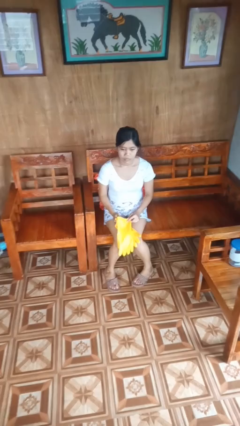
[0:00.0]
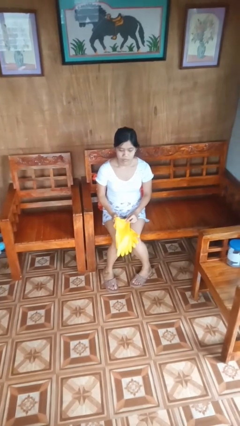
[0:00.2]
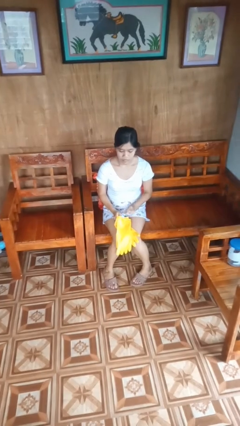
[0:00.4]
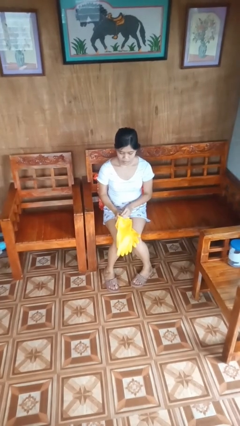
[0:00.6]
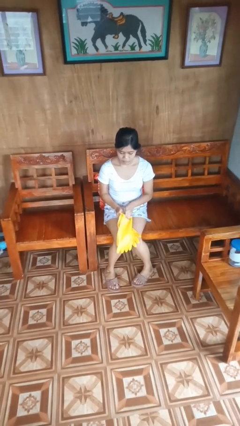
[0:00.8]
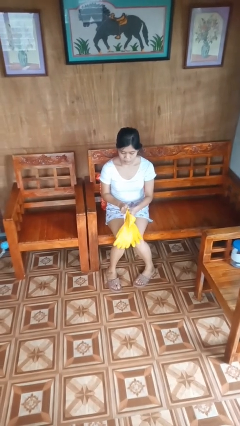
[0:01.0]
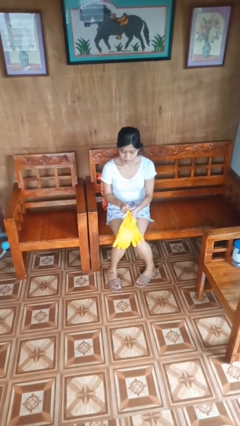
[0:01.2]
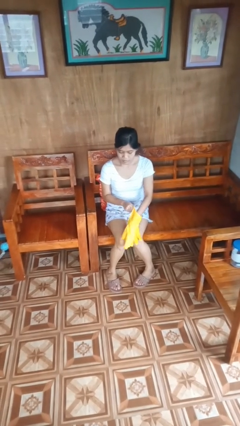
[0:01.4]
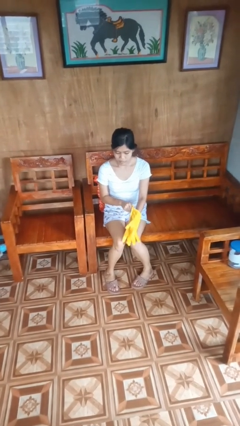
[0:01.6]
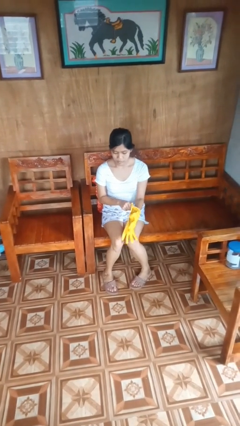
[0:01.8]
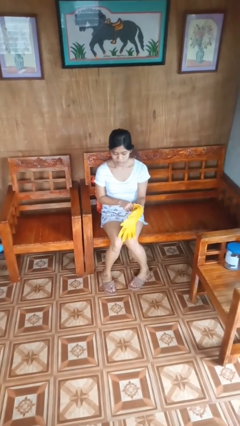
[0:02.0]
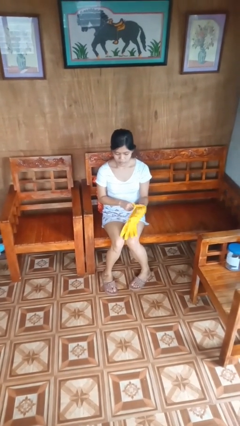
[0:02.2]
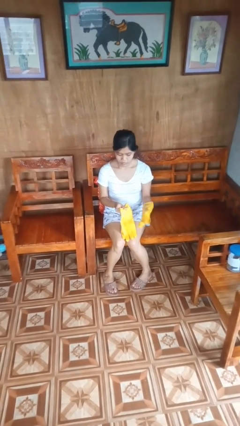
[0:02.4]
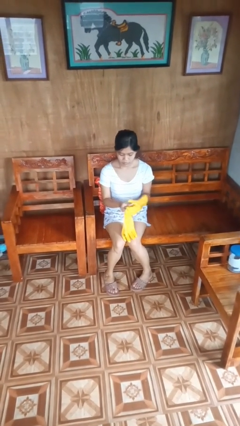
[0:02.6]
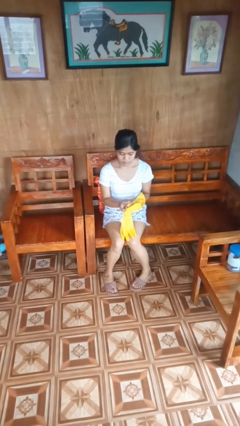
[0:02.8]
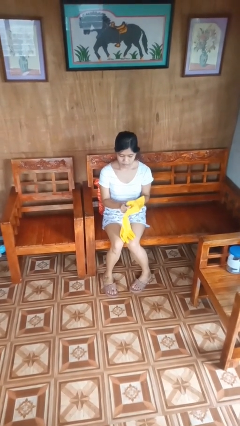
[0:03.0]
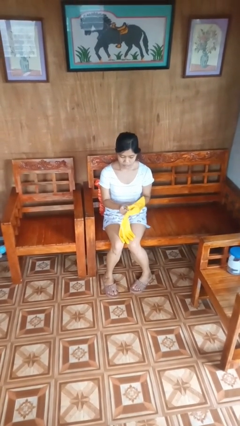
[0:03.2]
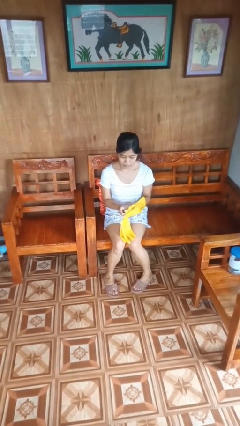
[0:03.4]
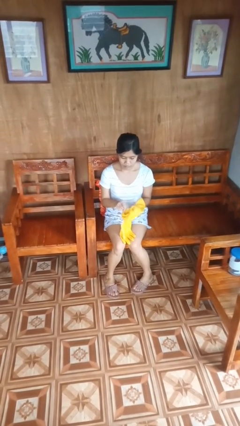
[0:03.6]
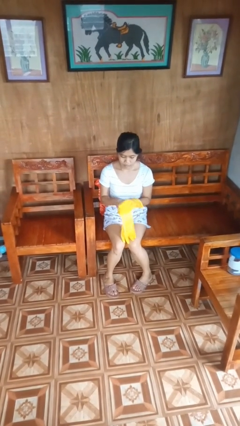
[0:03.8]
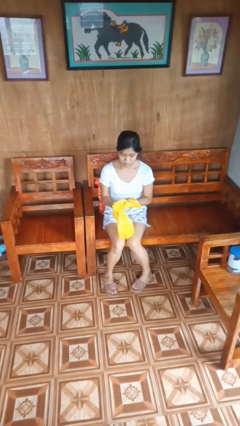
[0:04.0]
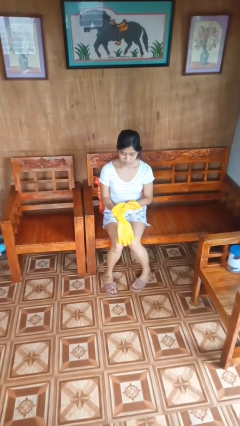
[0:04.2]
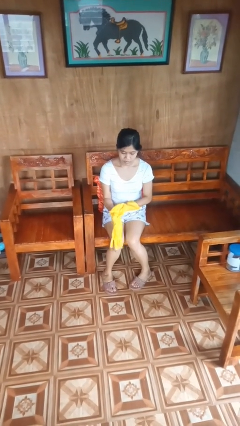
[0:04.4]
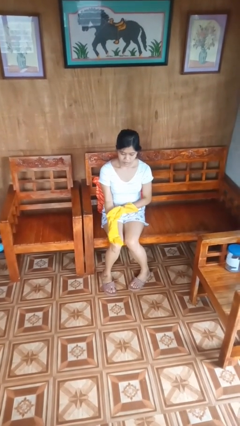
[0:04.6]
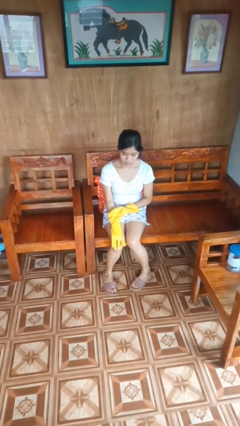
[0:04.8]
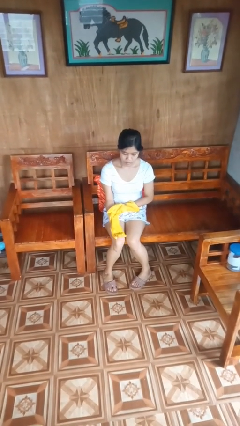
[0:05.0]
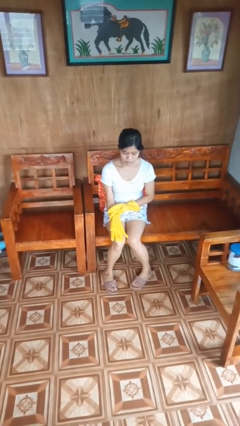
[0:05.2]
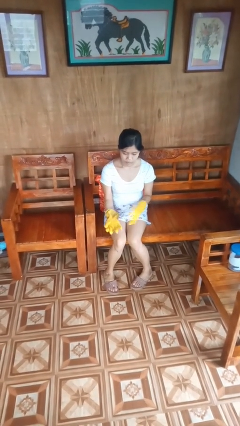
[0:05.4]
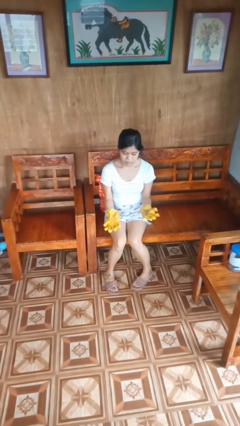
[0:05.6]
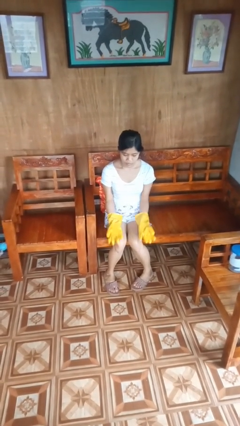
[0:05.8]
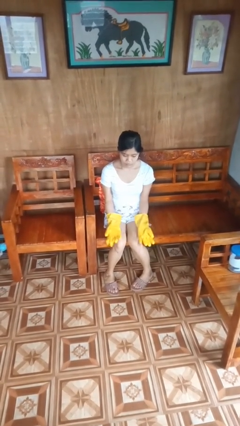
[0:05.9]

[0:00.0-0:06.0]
person puts on gloves

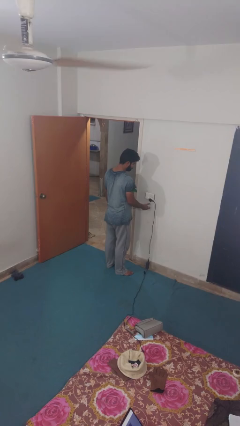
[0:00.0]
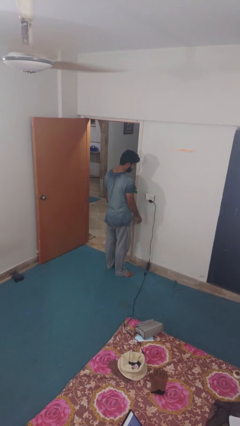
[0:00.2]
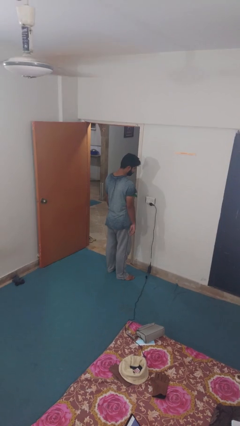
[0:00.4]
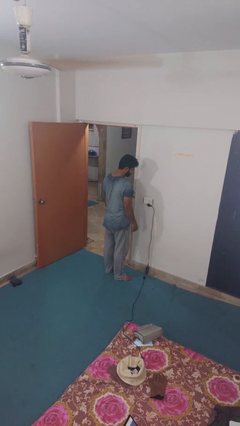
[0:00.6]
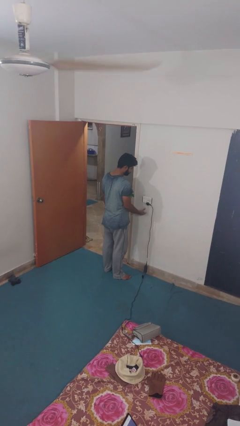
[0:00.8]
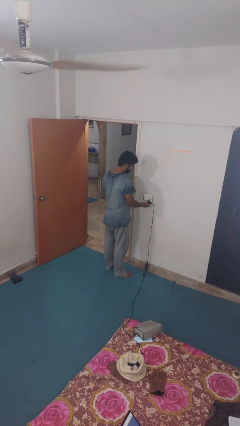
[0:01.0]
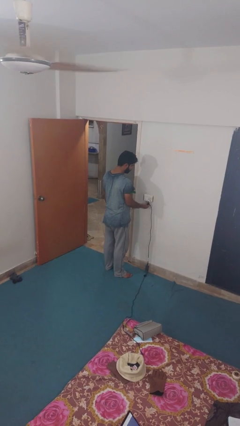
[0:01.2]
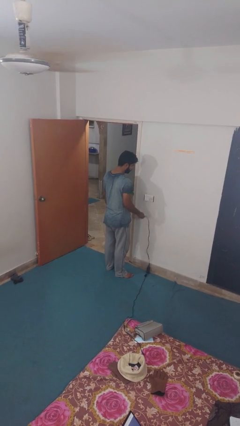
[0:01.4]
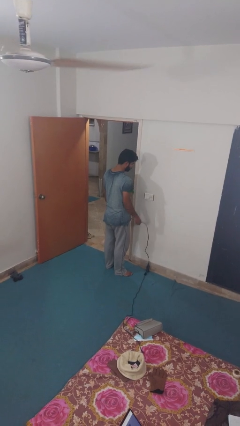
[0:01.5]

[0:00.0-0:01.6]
person unplugs from electrical socket

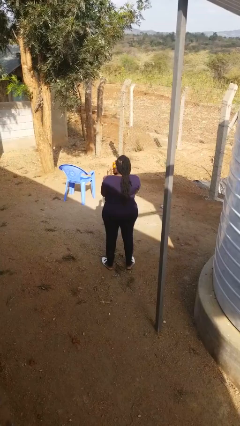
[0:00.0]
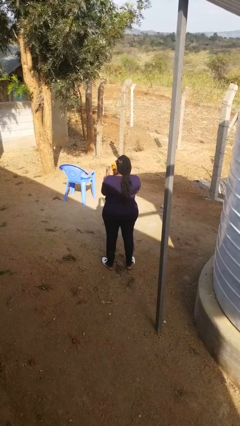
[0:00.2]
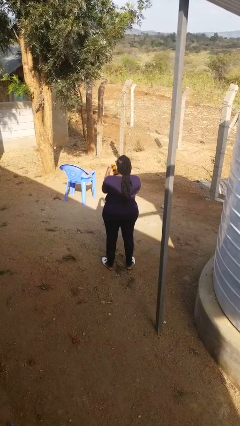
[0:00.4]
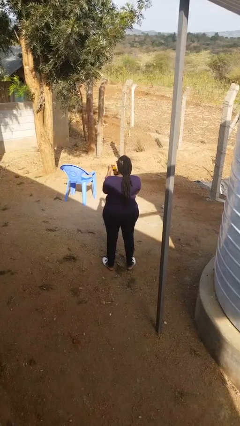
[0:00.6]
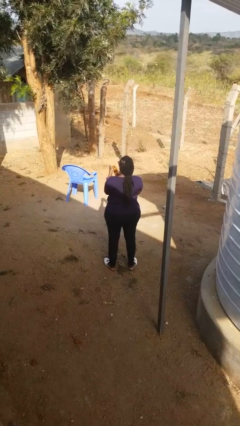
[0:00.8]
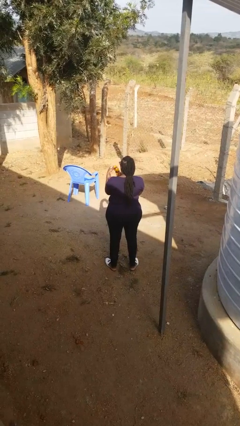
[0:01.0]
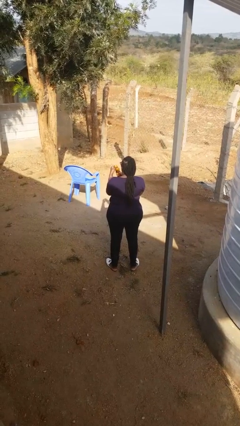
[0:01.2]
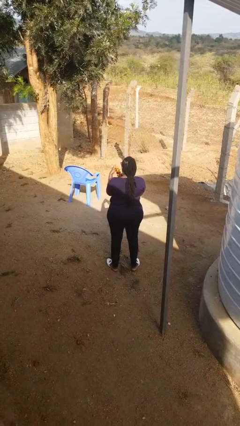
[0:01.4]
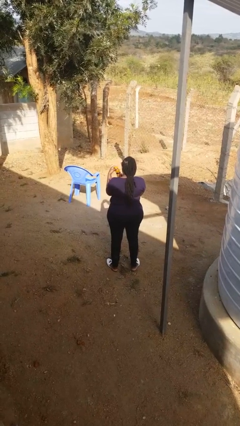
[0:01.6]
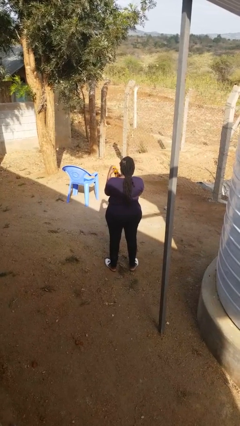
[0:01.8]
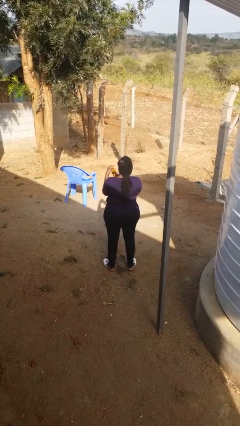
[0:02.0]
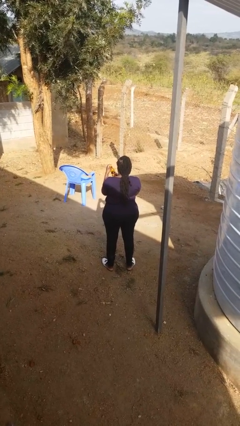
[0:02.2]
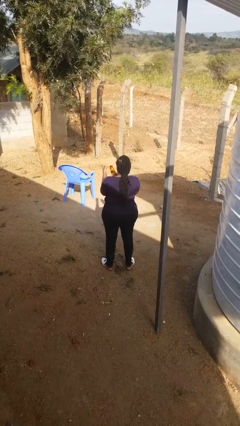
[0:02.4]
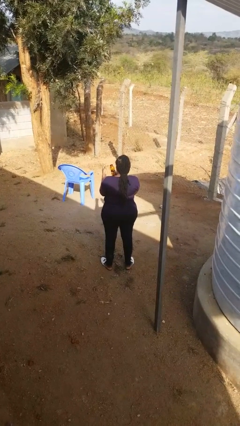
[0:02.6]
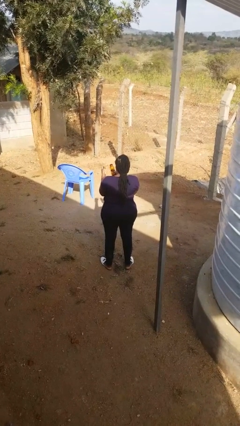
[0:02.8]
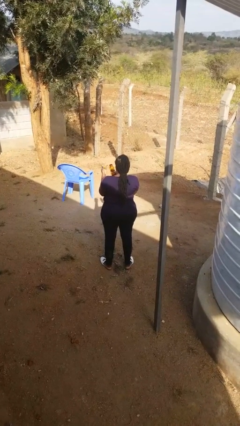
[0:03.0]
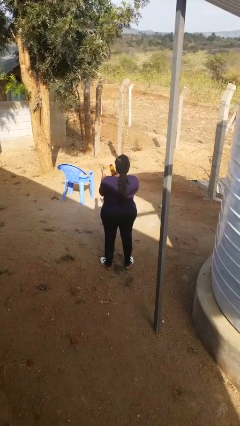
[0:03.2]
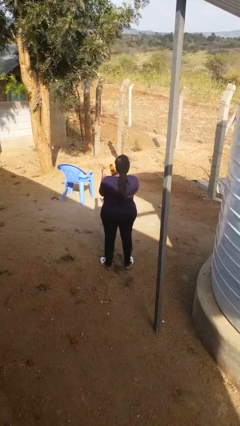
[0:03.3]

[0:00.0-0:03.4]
person opens jar

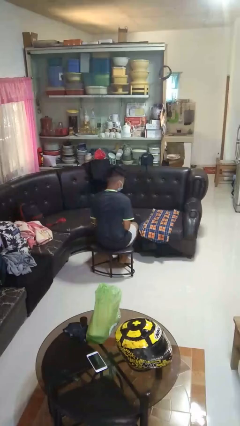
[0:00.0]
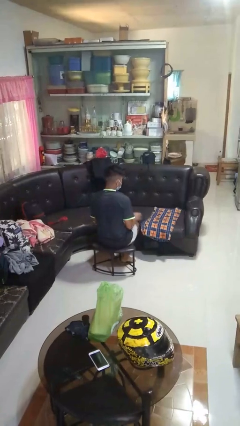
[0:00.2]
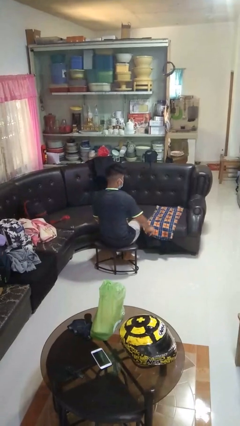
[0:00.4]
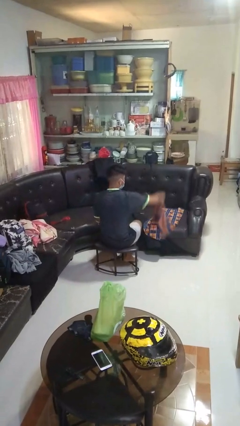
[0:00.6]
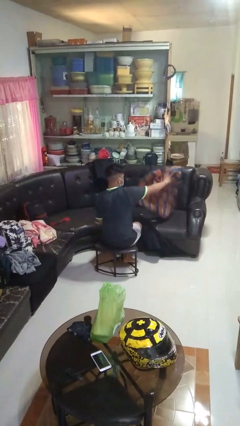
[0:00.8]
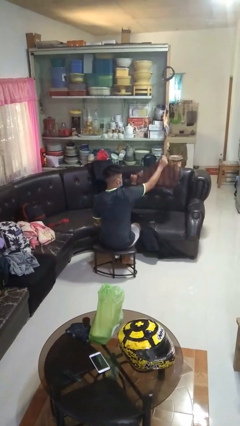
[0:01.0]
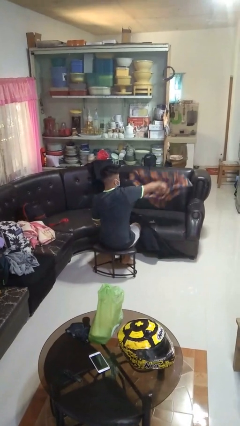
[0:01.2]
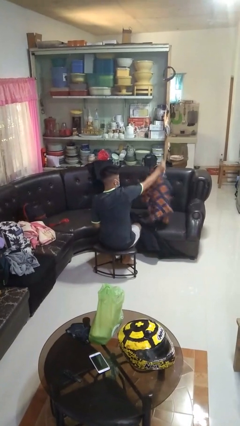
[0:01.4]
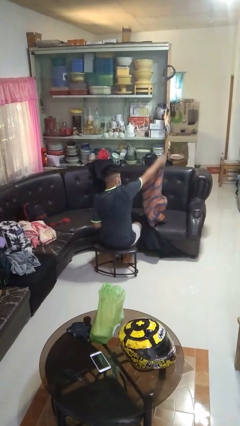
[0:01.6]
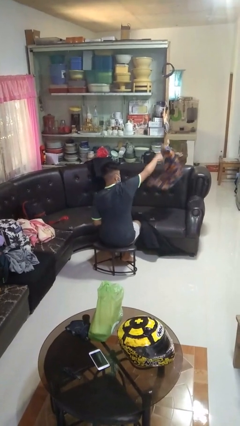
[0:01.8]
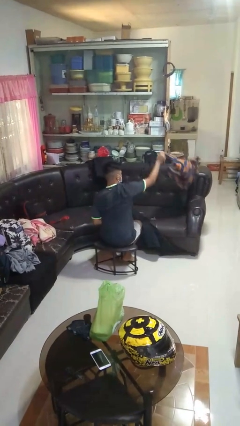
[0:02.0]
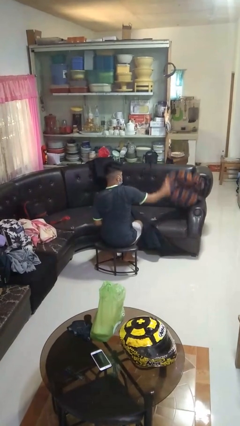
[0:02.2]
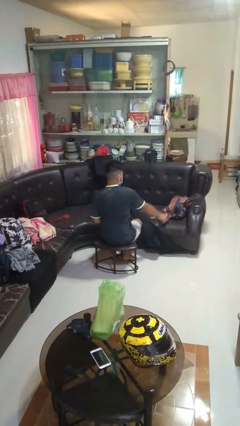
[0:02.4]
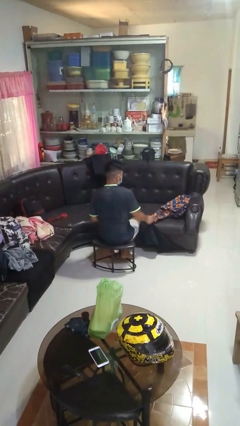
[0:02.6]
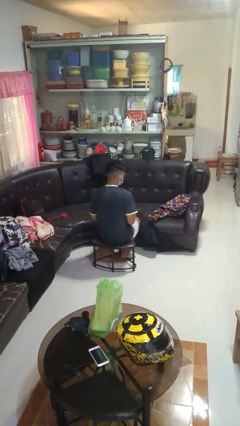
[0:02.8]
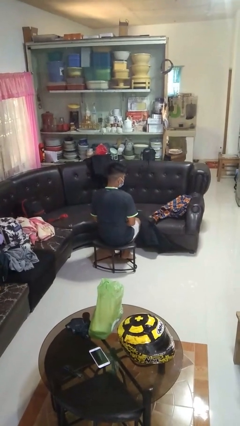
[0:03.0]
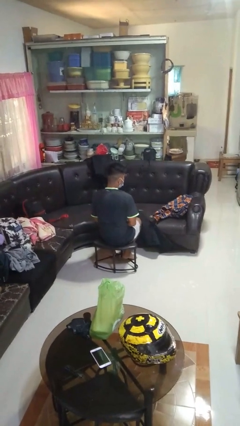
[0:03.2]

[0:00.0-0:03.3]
person unfolds blanket

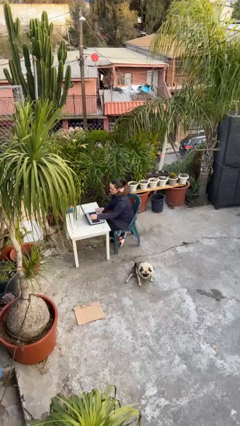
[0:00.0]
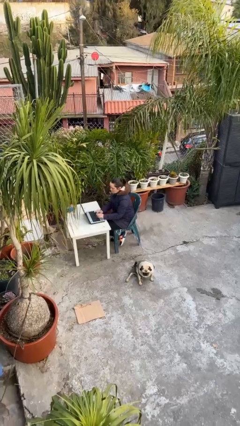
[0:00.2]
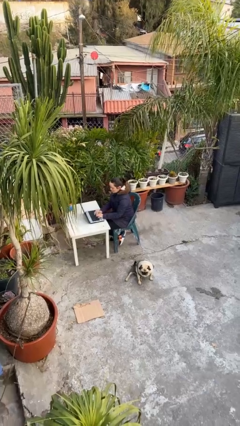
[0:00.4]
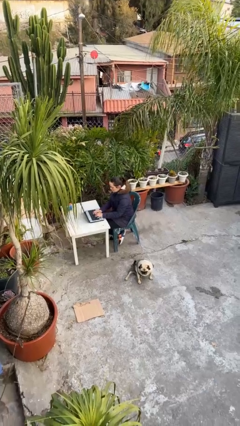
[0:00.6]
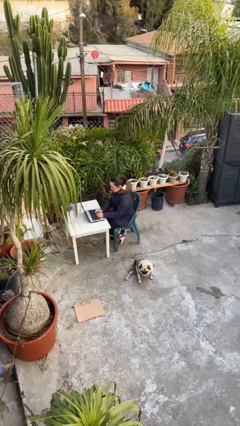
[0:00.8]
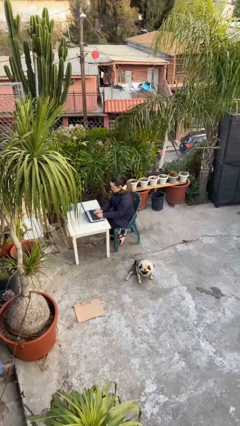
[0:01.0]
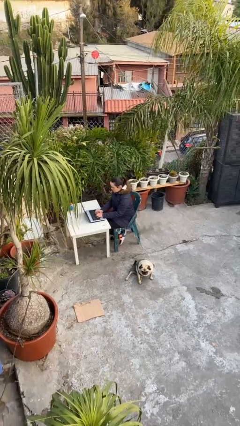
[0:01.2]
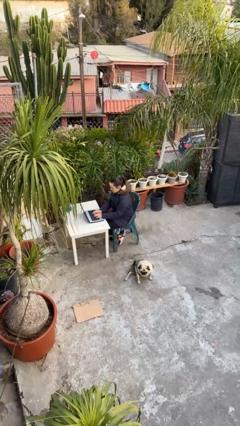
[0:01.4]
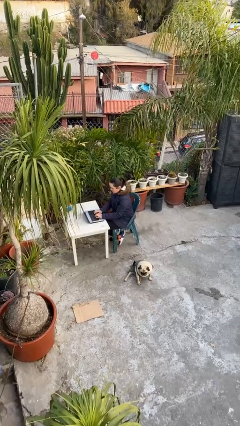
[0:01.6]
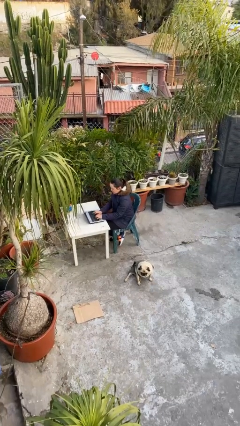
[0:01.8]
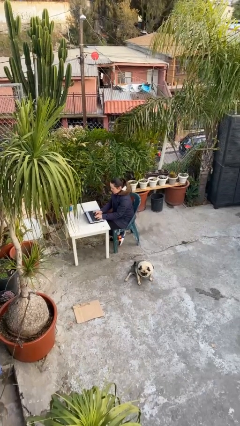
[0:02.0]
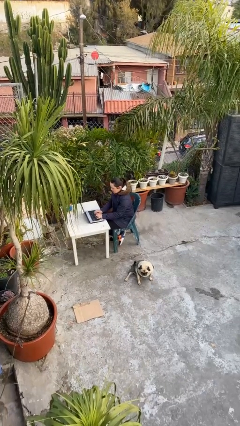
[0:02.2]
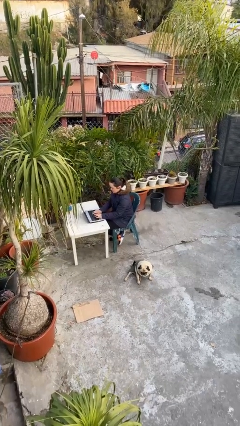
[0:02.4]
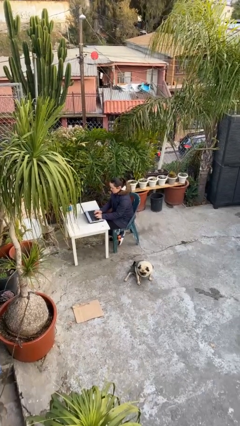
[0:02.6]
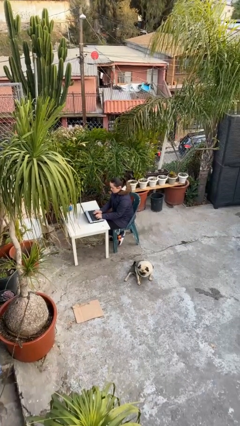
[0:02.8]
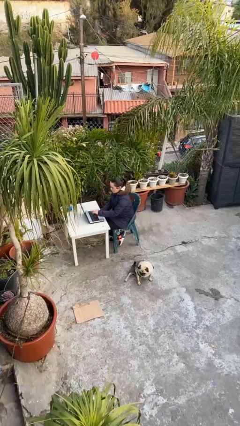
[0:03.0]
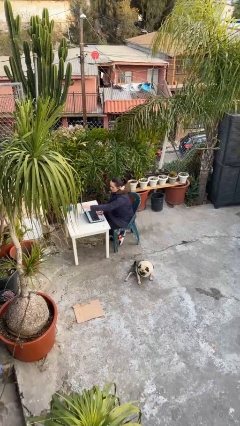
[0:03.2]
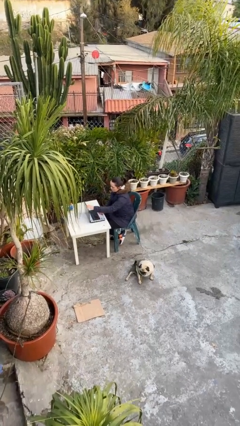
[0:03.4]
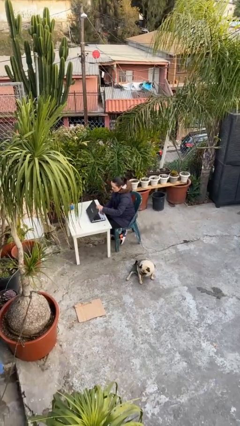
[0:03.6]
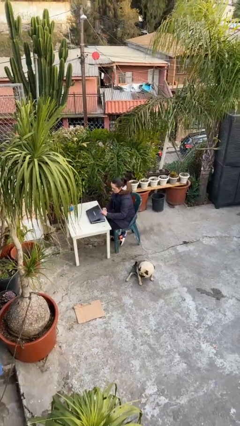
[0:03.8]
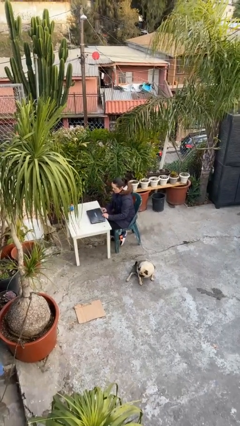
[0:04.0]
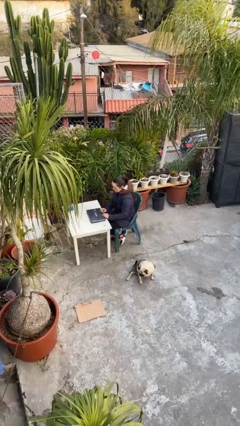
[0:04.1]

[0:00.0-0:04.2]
person interacts with laptop
